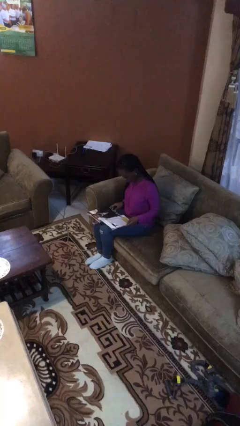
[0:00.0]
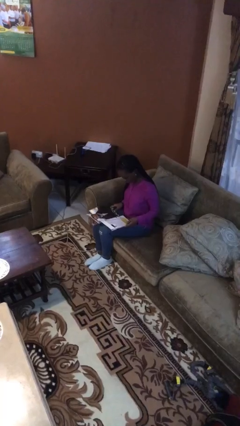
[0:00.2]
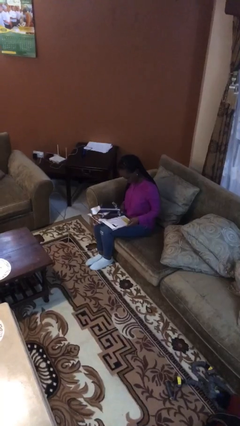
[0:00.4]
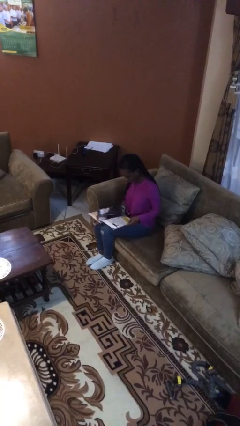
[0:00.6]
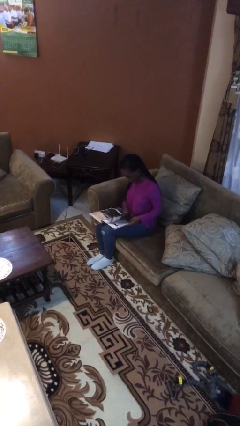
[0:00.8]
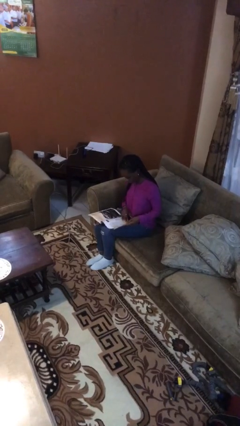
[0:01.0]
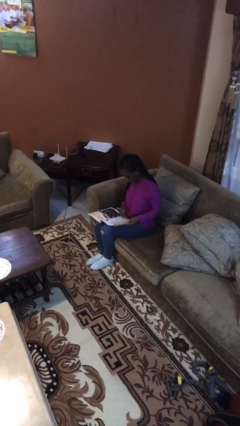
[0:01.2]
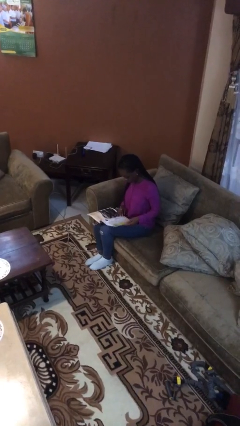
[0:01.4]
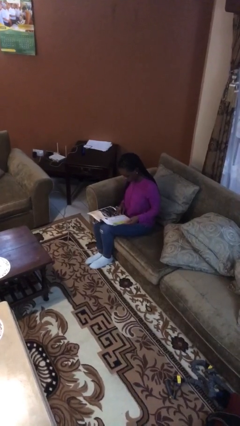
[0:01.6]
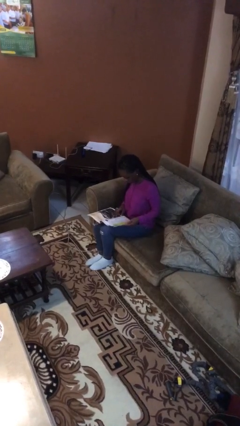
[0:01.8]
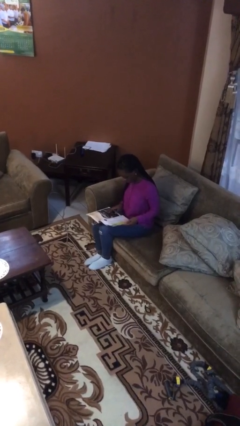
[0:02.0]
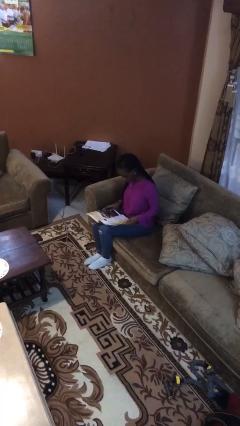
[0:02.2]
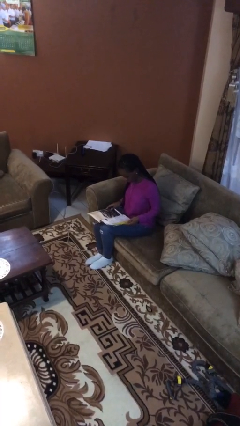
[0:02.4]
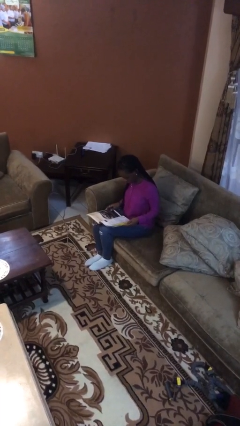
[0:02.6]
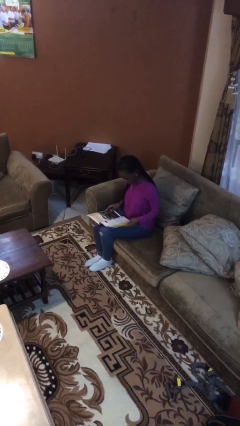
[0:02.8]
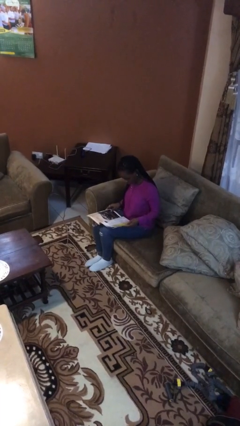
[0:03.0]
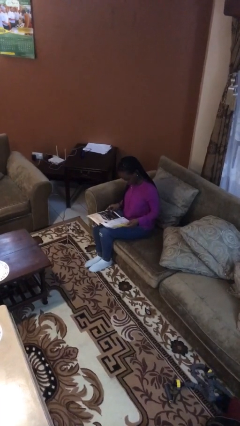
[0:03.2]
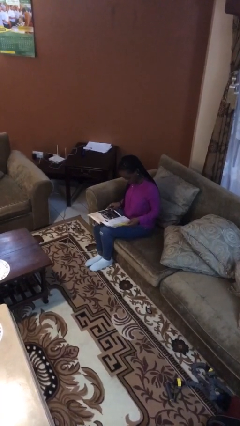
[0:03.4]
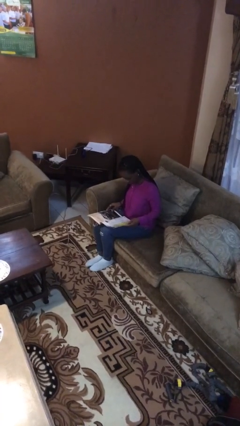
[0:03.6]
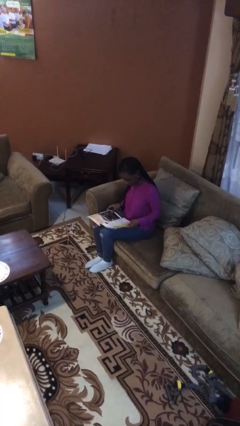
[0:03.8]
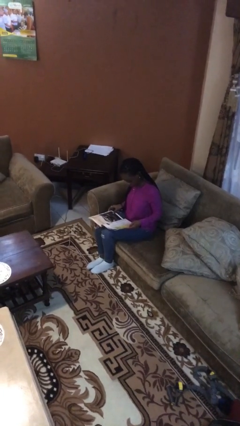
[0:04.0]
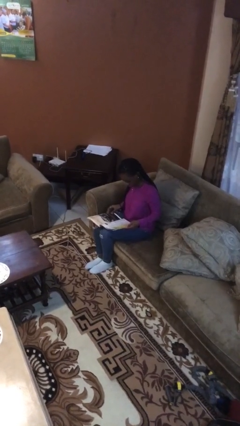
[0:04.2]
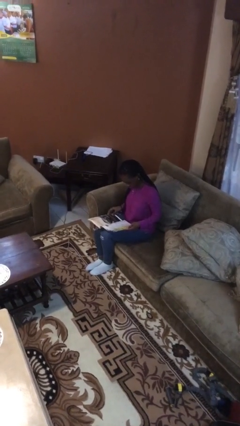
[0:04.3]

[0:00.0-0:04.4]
person reads document

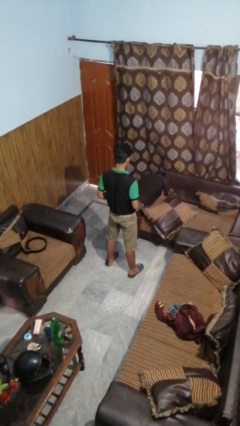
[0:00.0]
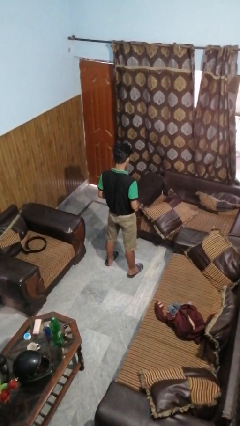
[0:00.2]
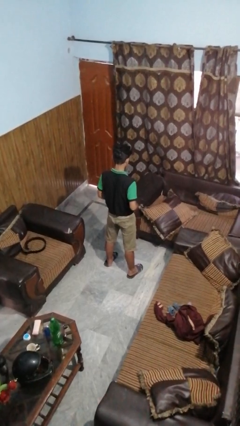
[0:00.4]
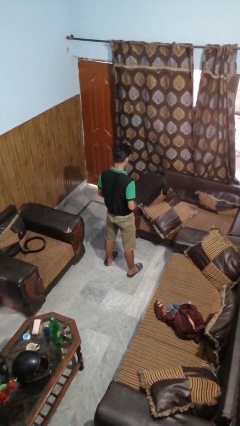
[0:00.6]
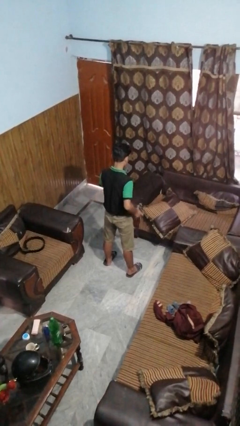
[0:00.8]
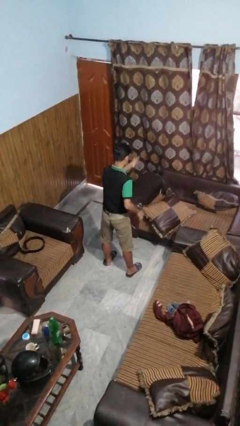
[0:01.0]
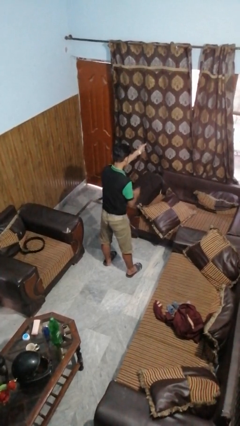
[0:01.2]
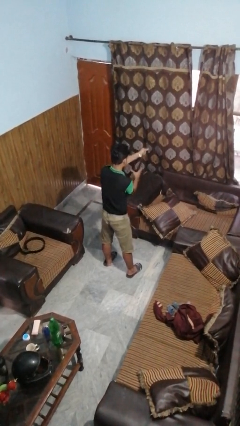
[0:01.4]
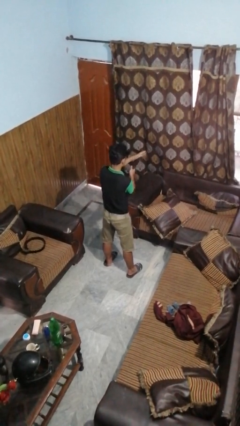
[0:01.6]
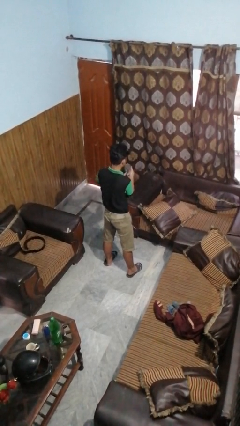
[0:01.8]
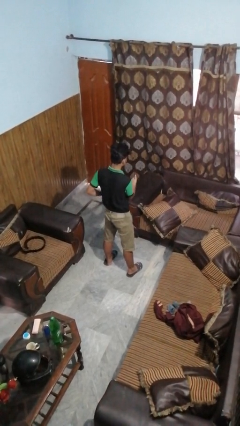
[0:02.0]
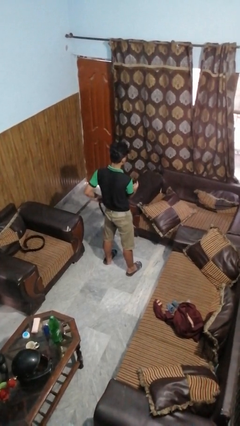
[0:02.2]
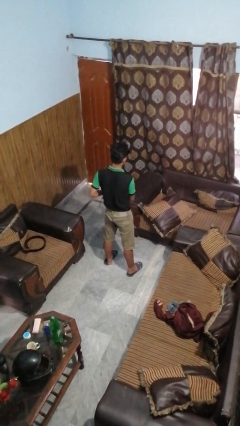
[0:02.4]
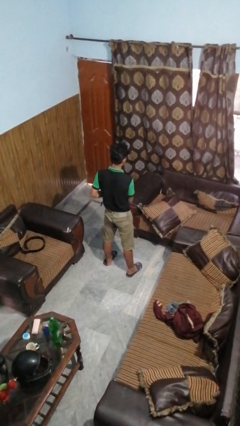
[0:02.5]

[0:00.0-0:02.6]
person takes off belt

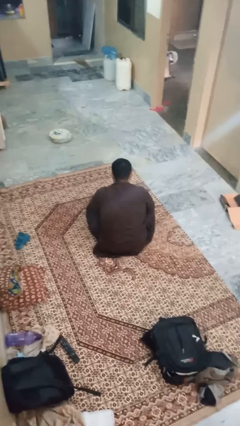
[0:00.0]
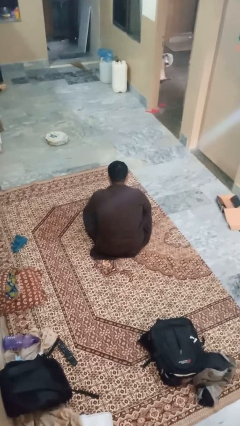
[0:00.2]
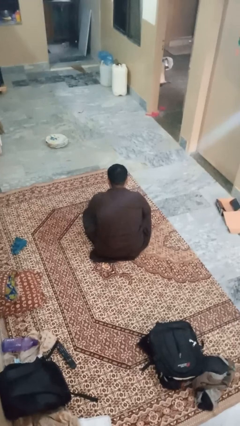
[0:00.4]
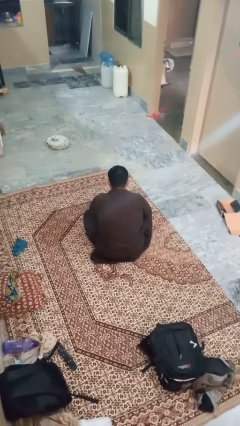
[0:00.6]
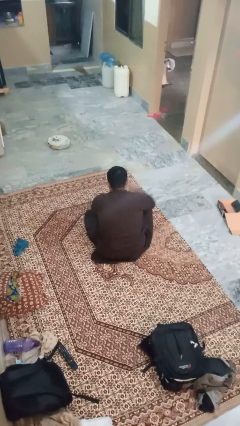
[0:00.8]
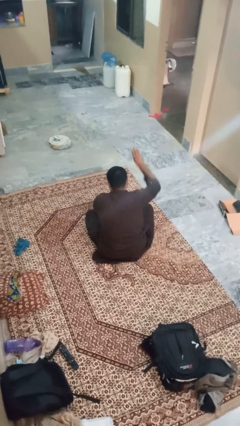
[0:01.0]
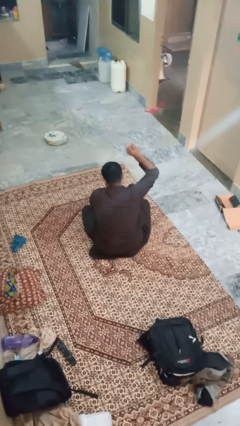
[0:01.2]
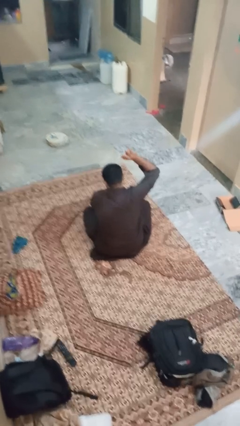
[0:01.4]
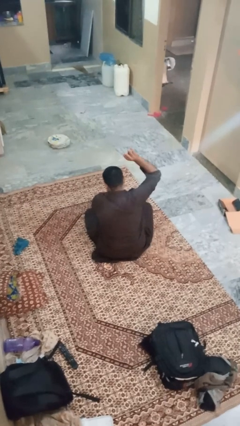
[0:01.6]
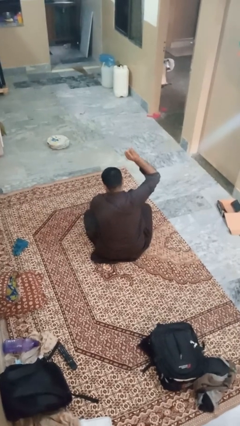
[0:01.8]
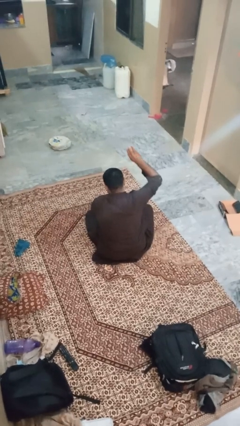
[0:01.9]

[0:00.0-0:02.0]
person gestures number three

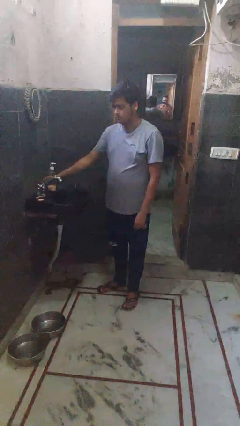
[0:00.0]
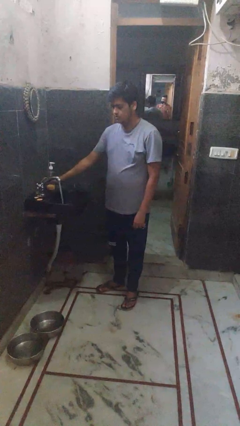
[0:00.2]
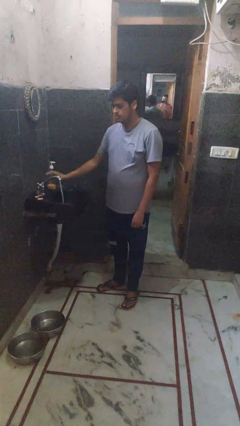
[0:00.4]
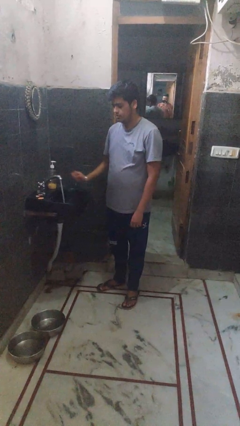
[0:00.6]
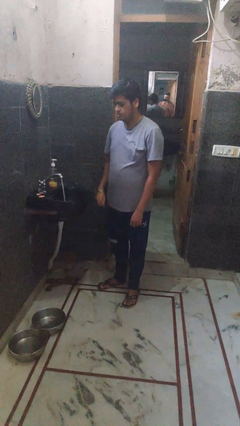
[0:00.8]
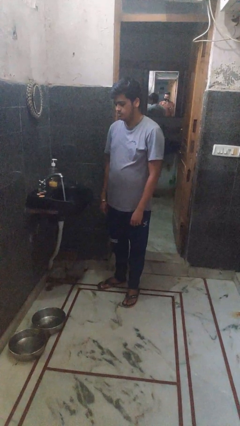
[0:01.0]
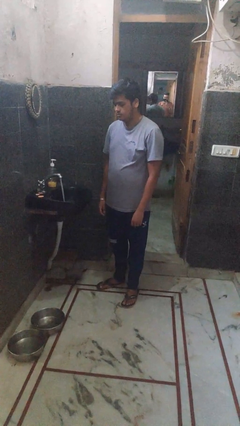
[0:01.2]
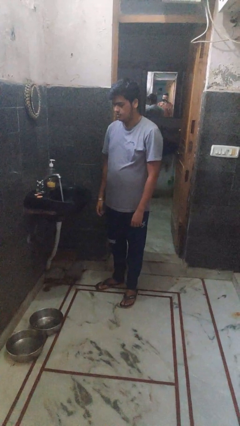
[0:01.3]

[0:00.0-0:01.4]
person turns on faucet

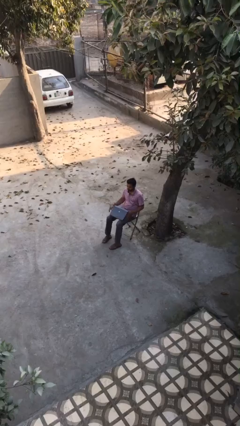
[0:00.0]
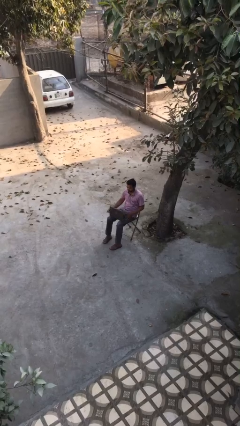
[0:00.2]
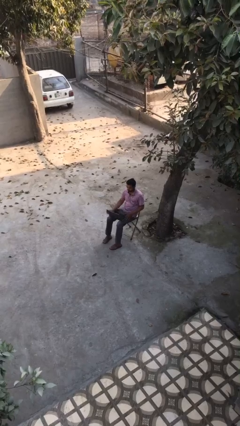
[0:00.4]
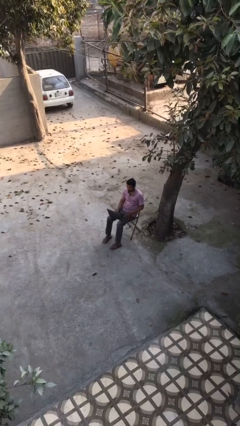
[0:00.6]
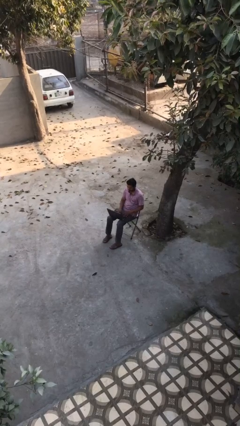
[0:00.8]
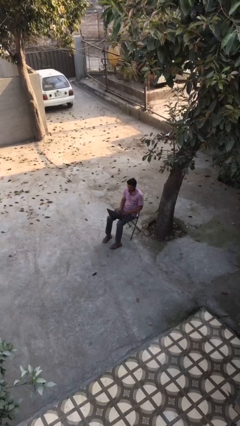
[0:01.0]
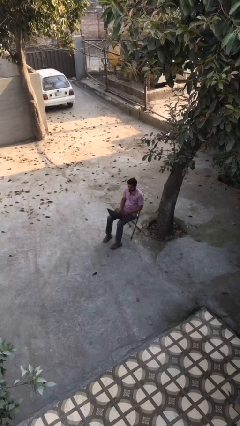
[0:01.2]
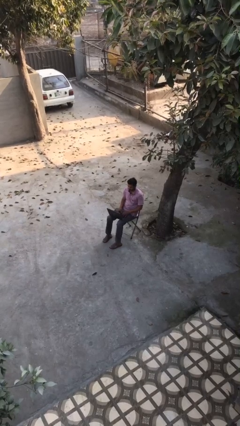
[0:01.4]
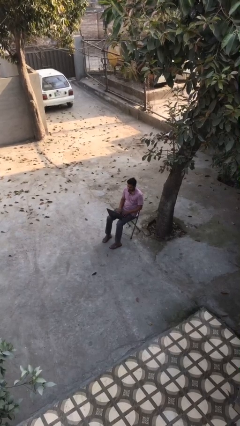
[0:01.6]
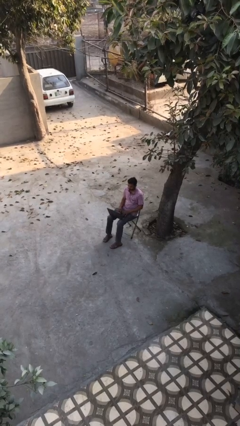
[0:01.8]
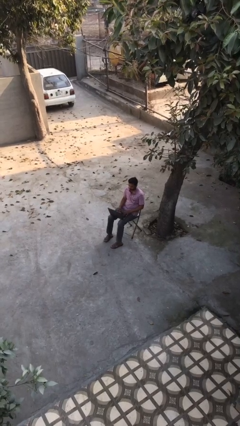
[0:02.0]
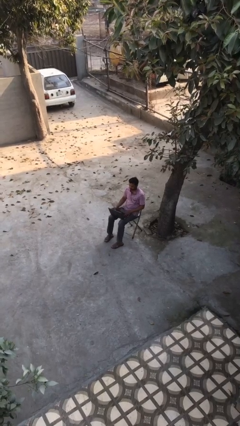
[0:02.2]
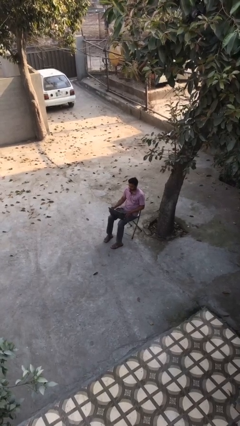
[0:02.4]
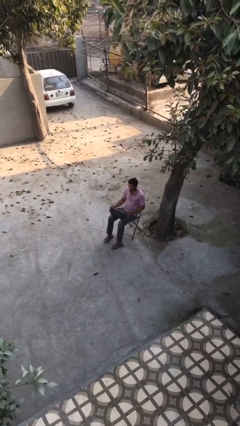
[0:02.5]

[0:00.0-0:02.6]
person interacts with laptop

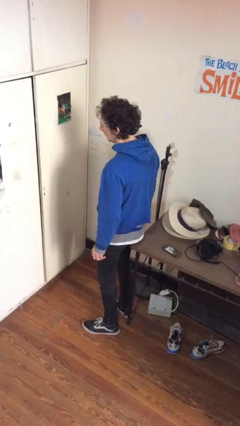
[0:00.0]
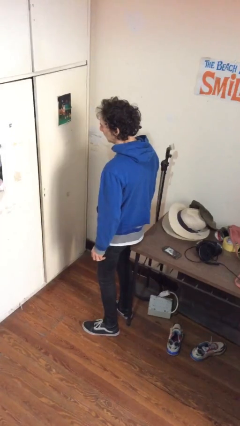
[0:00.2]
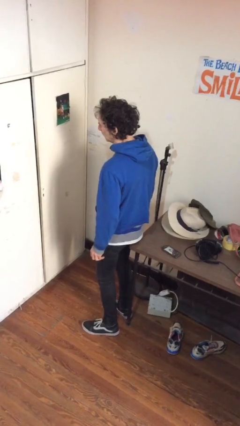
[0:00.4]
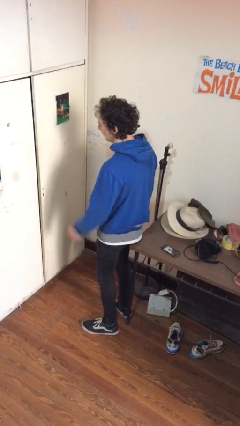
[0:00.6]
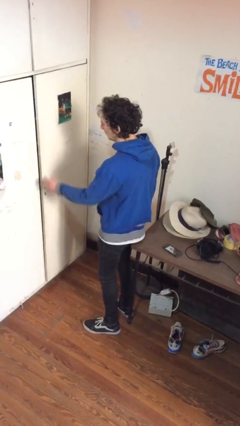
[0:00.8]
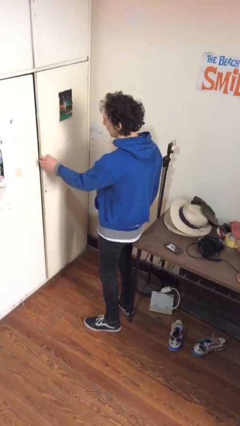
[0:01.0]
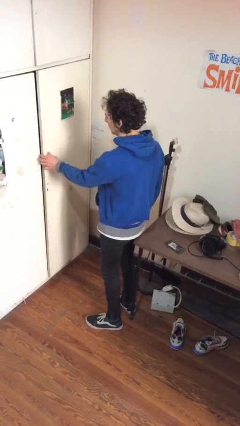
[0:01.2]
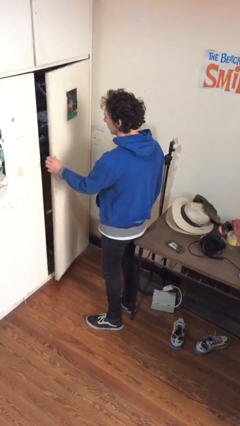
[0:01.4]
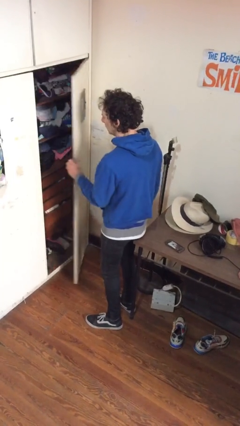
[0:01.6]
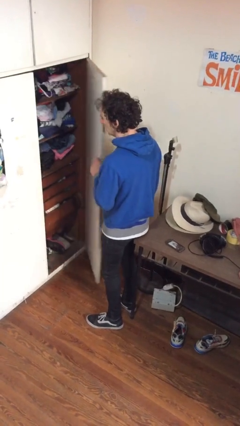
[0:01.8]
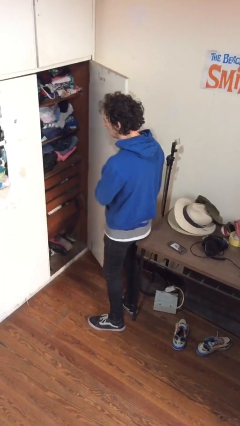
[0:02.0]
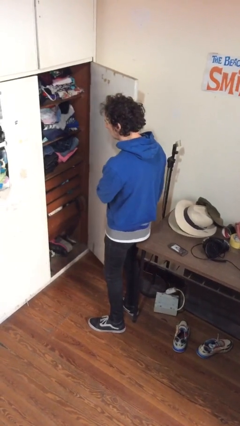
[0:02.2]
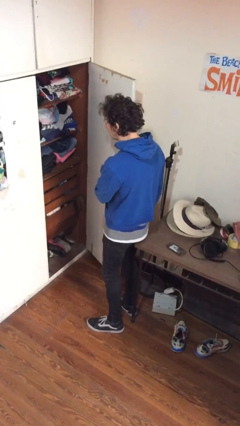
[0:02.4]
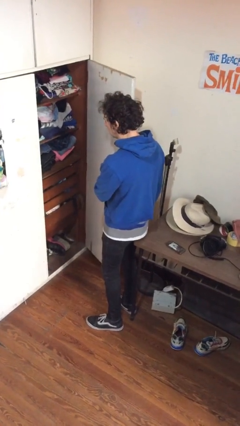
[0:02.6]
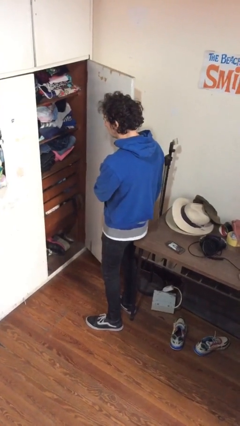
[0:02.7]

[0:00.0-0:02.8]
person opens closet door

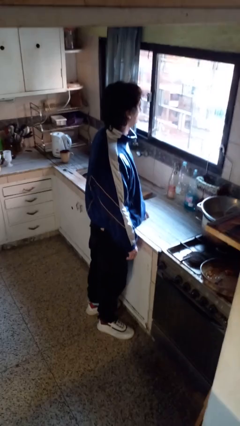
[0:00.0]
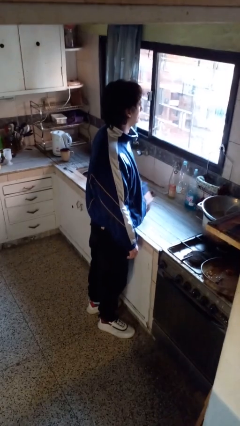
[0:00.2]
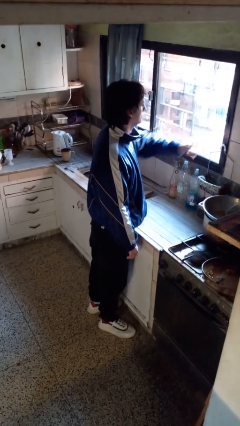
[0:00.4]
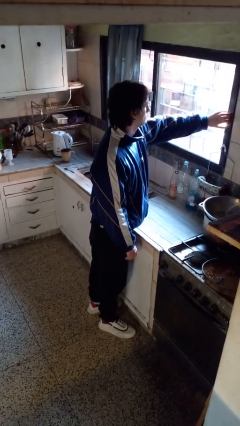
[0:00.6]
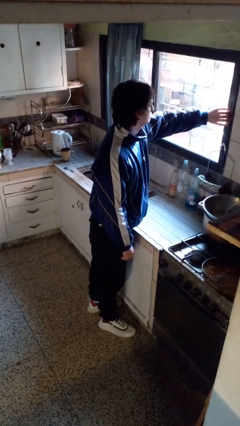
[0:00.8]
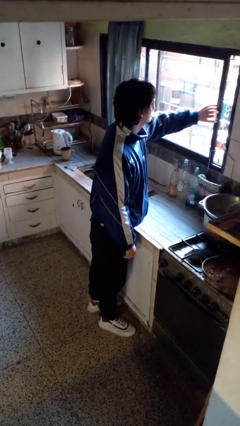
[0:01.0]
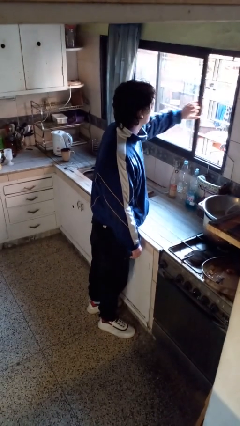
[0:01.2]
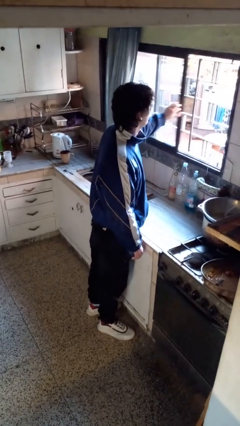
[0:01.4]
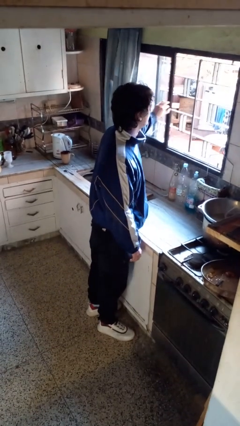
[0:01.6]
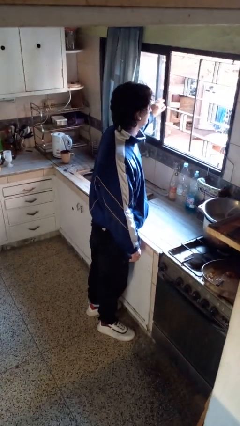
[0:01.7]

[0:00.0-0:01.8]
person opens home window
